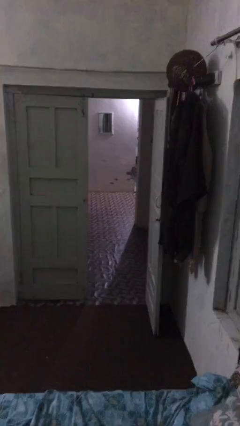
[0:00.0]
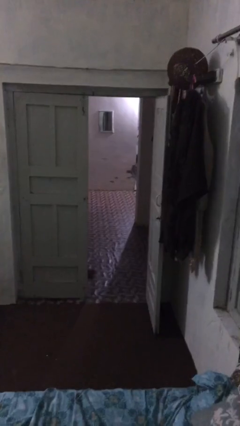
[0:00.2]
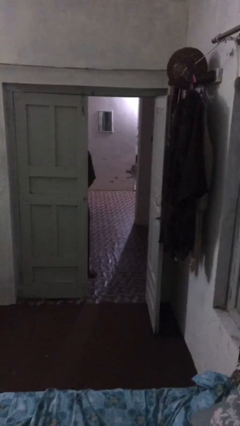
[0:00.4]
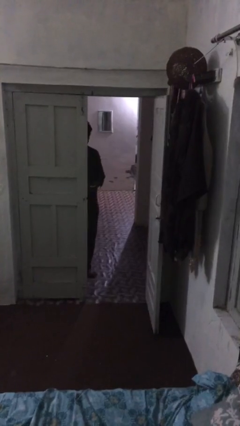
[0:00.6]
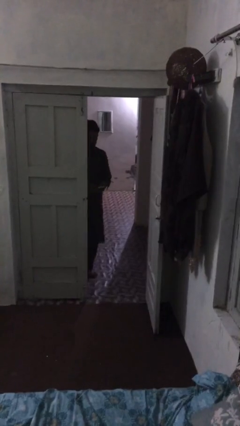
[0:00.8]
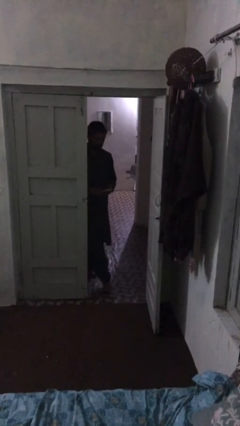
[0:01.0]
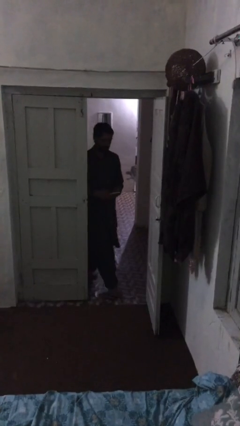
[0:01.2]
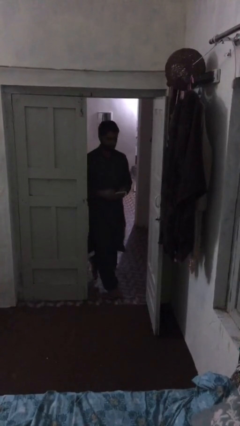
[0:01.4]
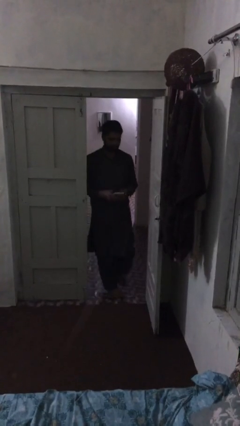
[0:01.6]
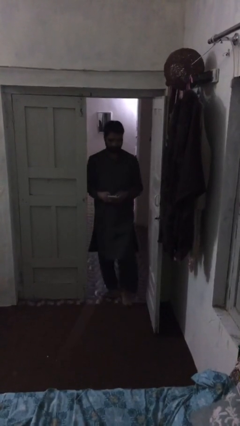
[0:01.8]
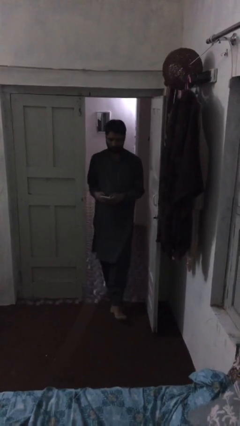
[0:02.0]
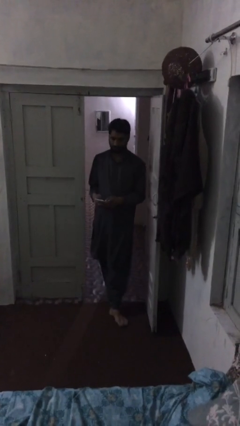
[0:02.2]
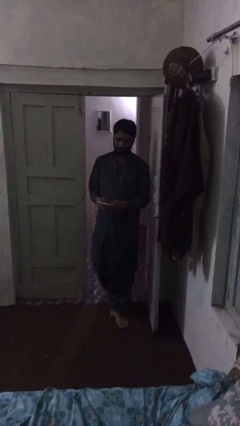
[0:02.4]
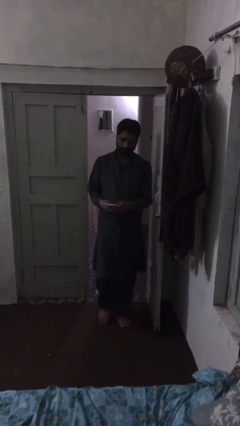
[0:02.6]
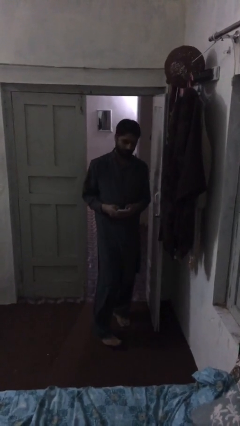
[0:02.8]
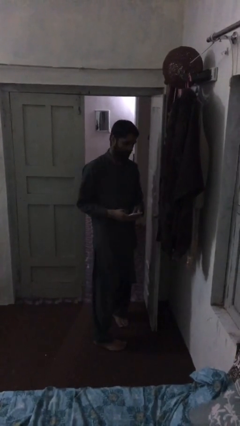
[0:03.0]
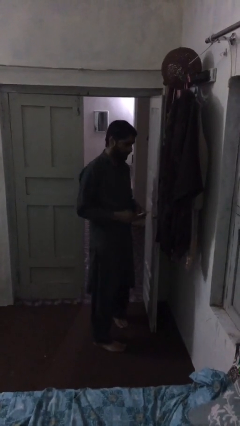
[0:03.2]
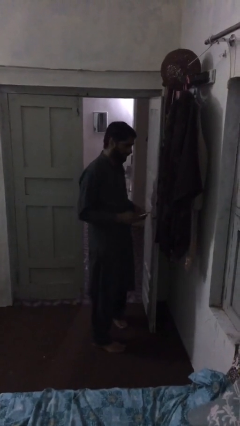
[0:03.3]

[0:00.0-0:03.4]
person enters scene through structure

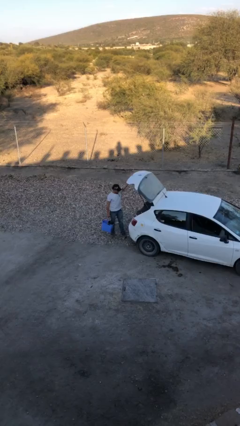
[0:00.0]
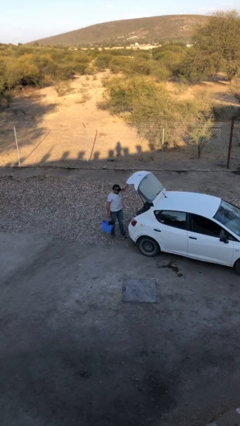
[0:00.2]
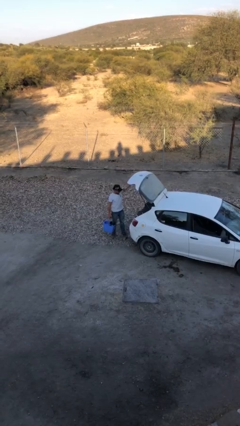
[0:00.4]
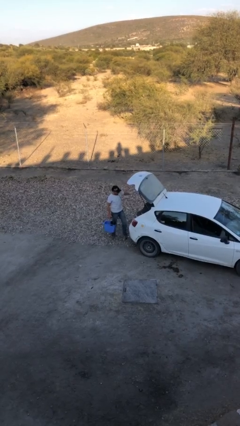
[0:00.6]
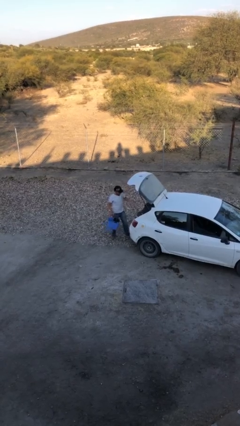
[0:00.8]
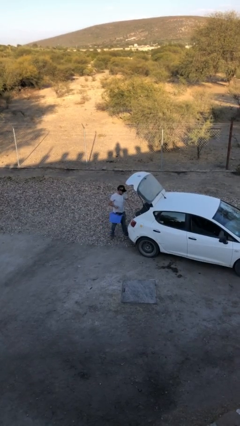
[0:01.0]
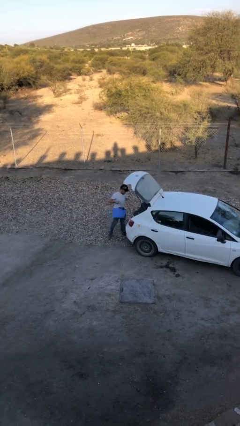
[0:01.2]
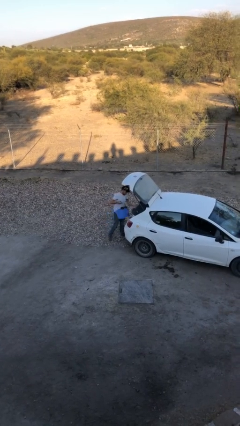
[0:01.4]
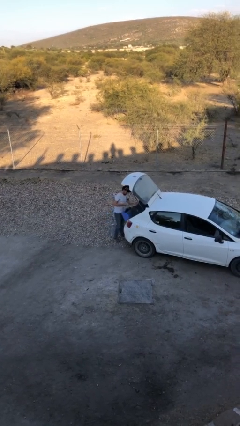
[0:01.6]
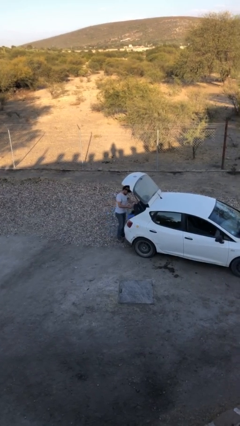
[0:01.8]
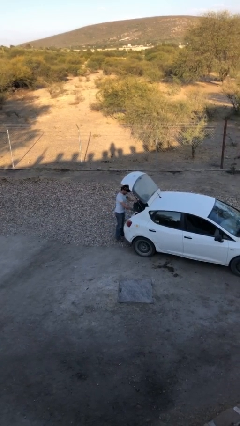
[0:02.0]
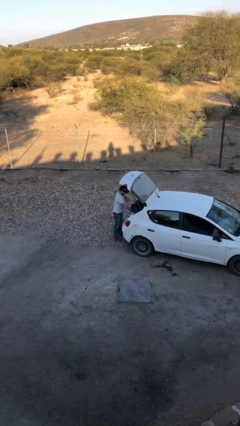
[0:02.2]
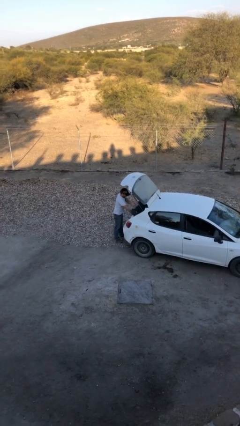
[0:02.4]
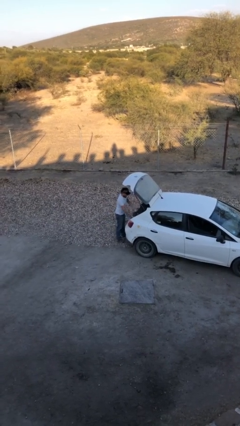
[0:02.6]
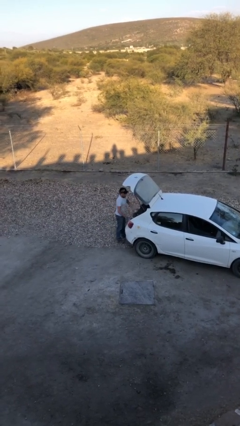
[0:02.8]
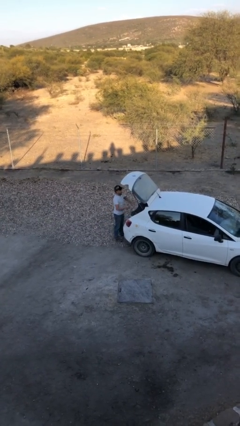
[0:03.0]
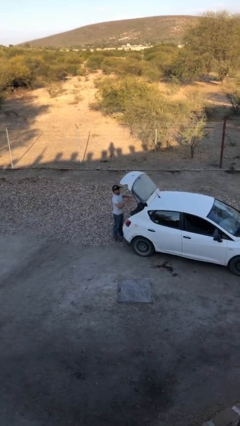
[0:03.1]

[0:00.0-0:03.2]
person loads car

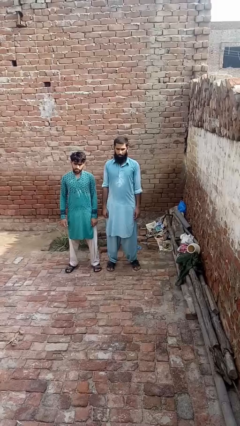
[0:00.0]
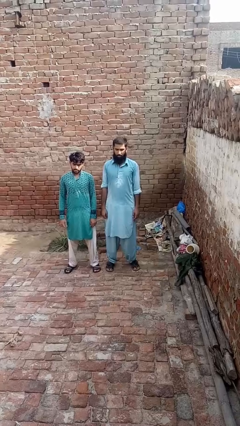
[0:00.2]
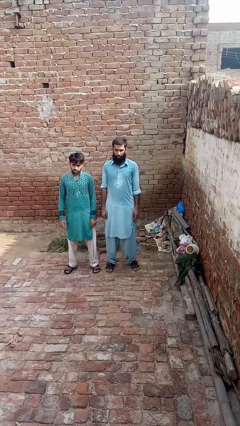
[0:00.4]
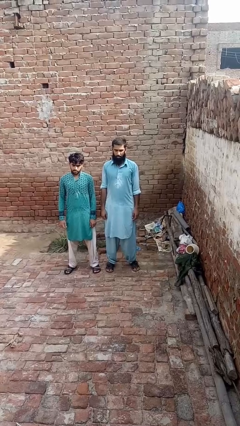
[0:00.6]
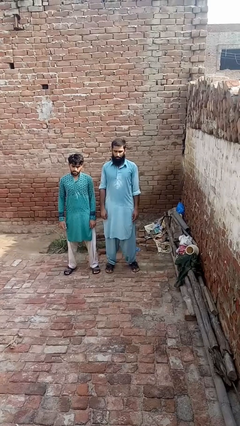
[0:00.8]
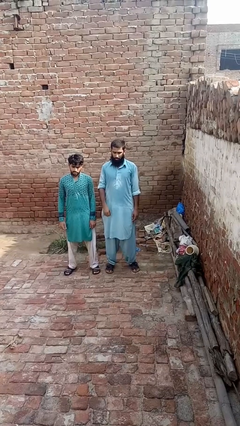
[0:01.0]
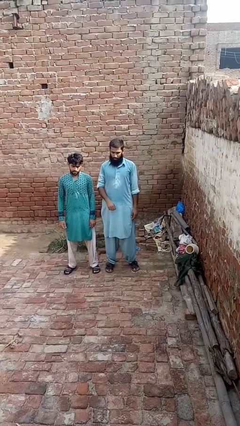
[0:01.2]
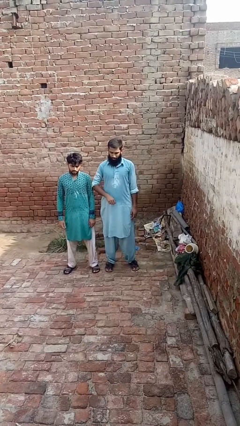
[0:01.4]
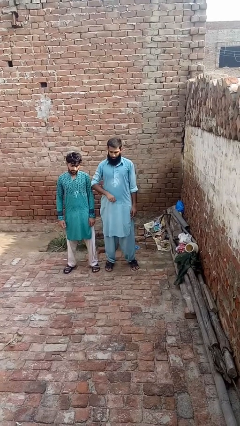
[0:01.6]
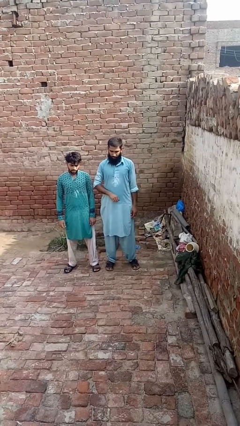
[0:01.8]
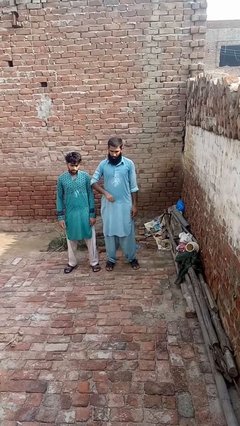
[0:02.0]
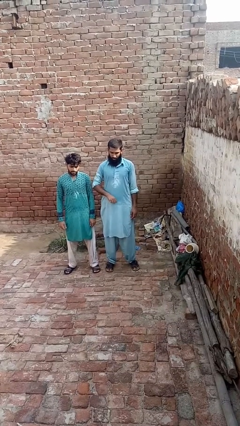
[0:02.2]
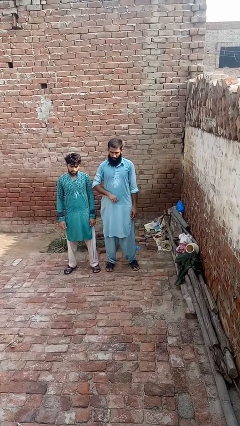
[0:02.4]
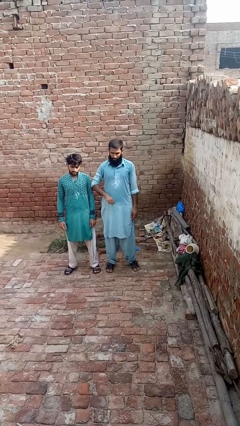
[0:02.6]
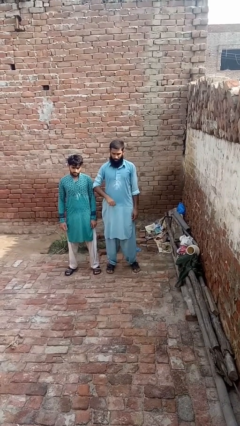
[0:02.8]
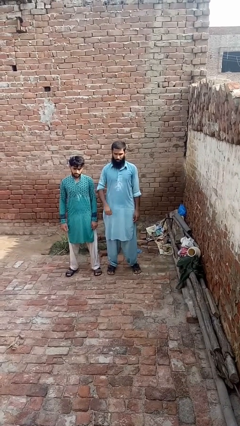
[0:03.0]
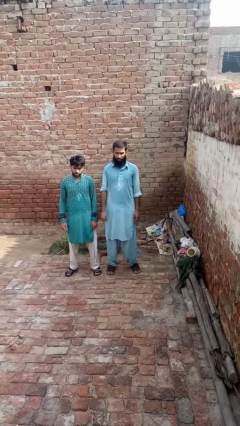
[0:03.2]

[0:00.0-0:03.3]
person nudges person with elbow

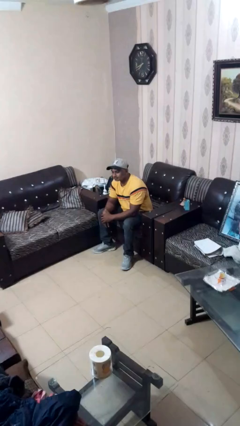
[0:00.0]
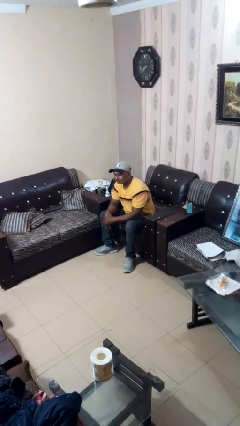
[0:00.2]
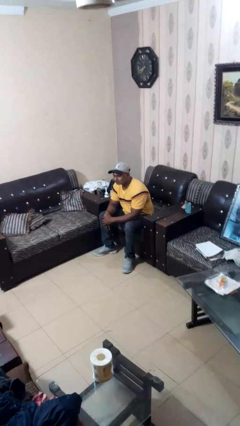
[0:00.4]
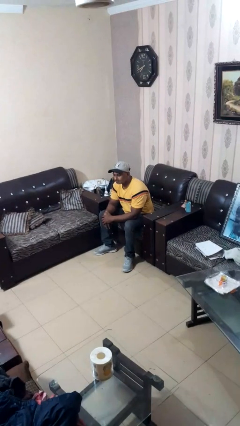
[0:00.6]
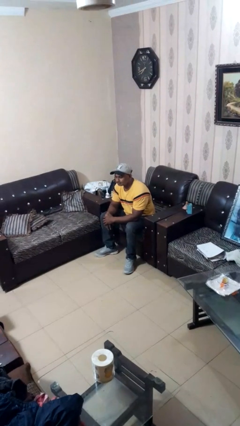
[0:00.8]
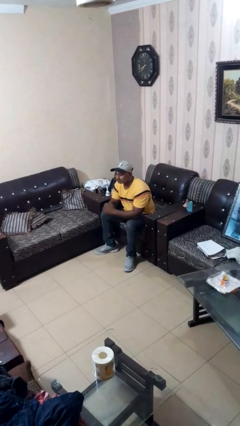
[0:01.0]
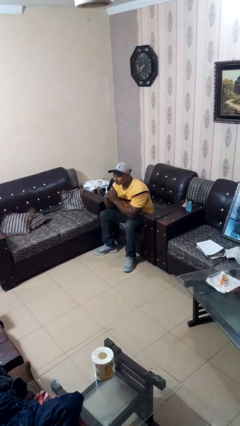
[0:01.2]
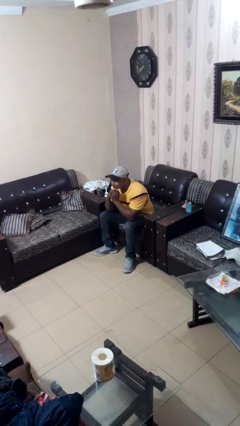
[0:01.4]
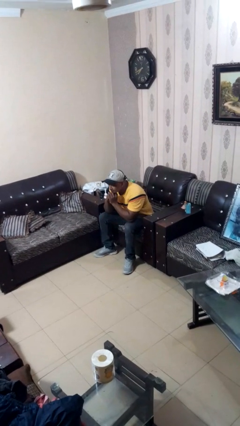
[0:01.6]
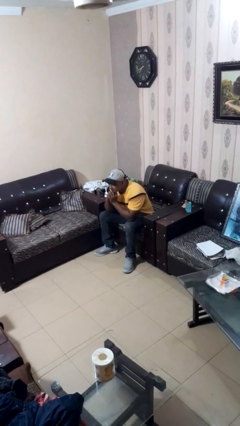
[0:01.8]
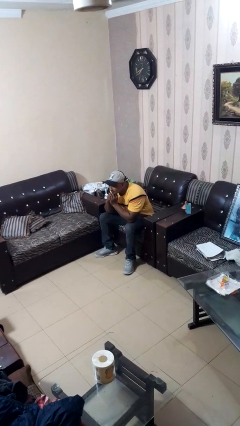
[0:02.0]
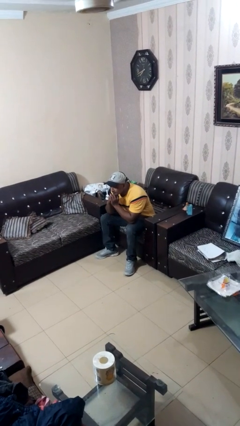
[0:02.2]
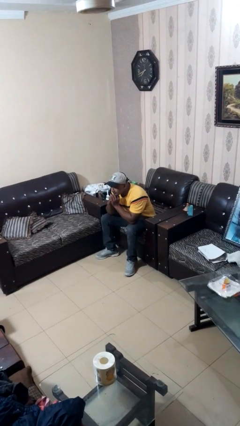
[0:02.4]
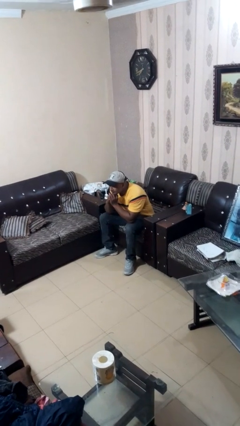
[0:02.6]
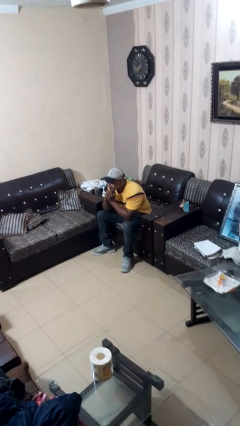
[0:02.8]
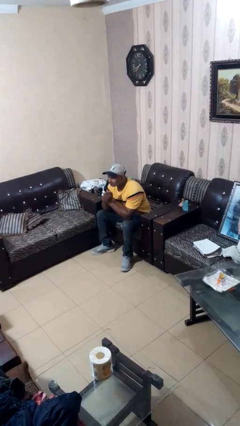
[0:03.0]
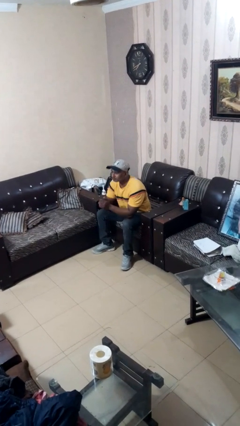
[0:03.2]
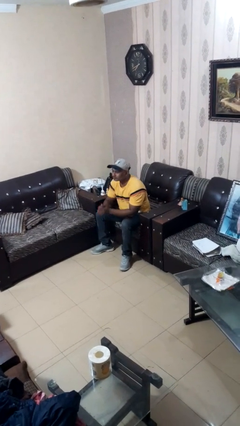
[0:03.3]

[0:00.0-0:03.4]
person strokes chin

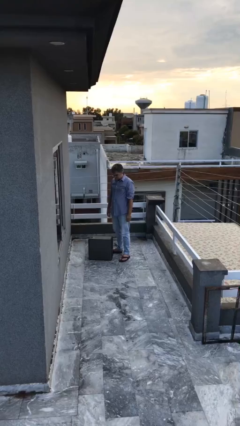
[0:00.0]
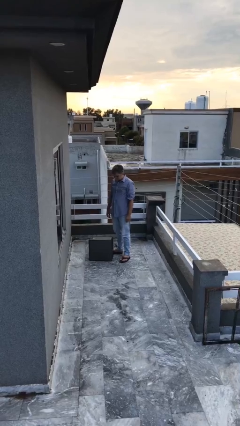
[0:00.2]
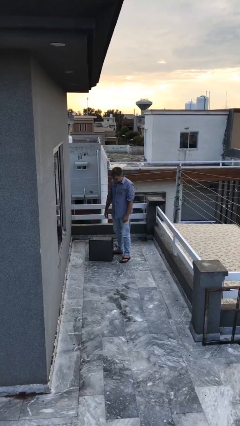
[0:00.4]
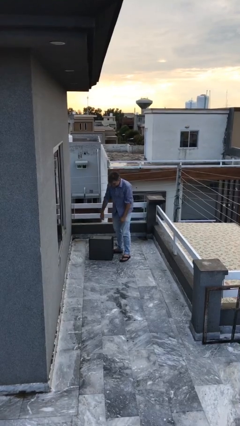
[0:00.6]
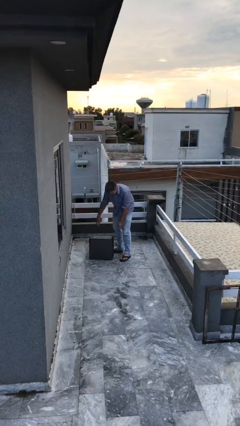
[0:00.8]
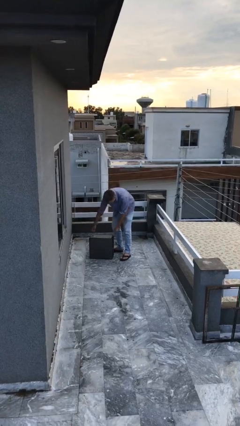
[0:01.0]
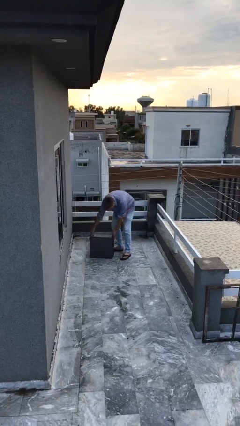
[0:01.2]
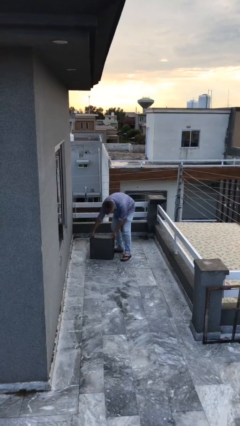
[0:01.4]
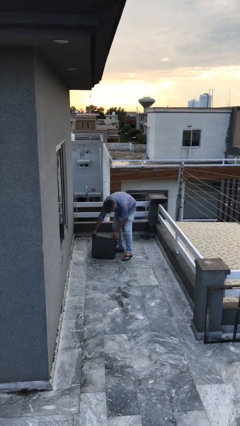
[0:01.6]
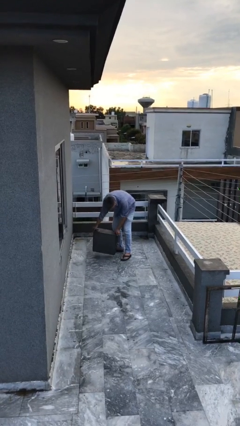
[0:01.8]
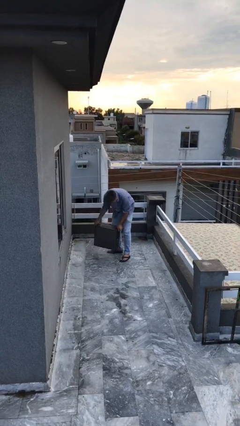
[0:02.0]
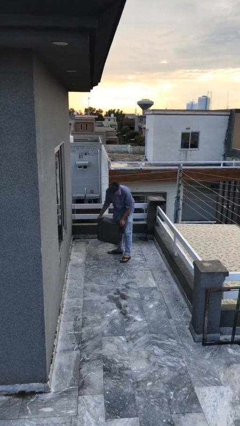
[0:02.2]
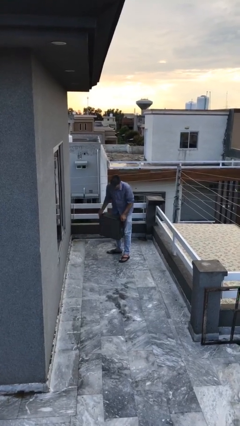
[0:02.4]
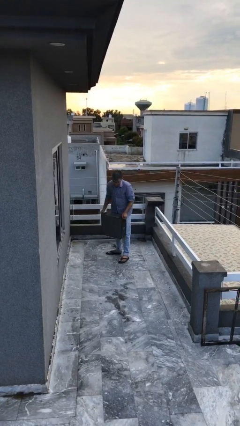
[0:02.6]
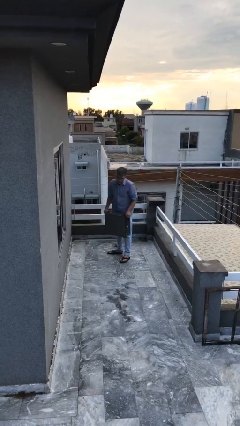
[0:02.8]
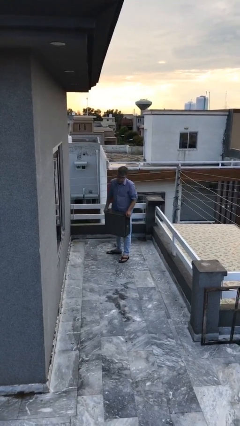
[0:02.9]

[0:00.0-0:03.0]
person picks up object from floor

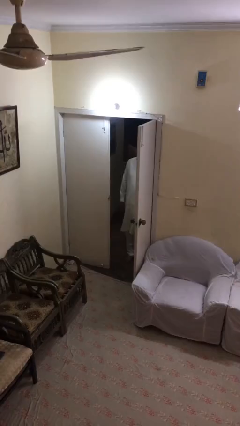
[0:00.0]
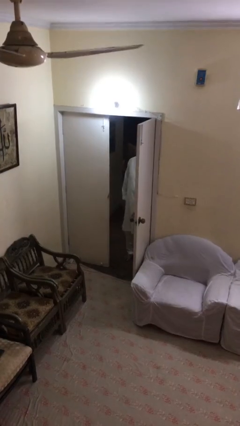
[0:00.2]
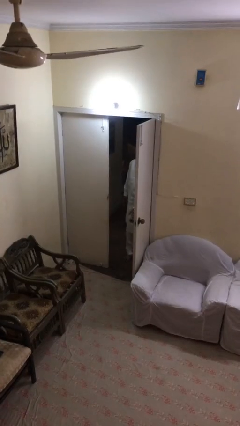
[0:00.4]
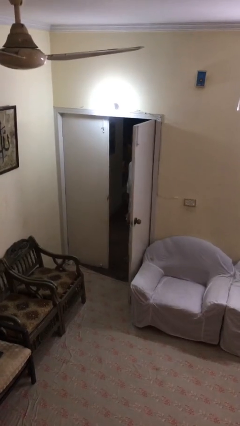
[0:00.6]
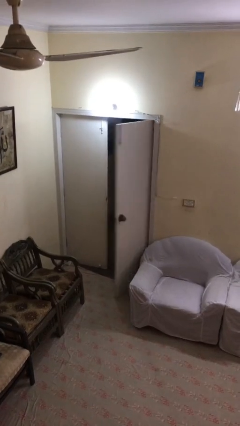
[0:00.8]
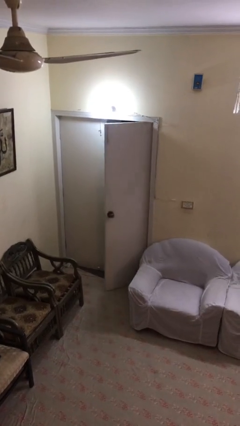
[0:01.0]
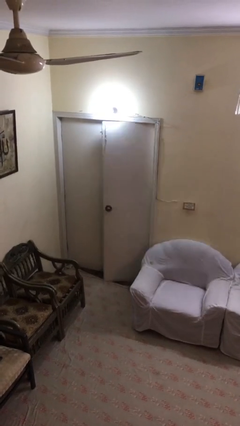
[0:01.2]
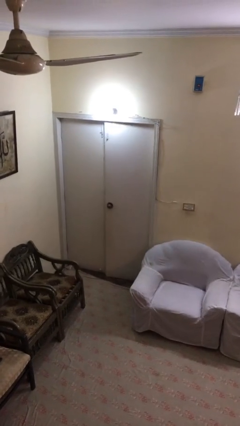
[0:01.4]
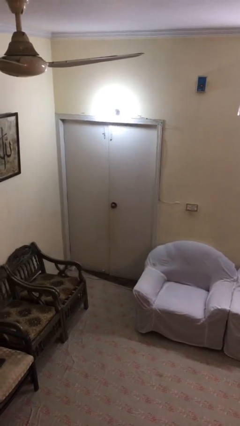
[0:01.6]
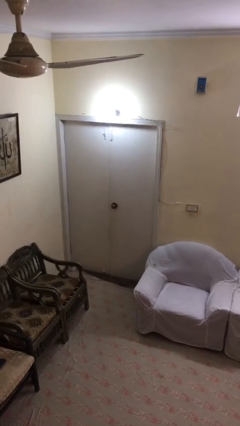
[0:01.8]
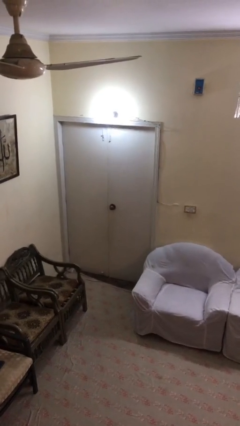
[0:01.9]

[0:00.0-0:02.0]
person closes facility door
